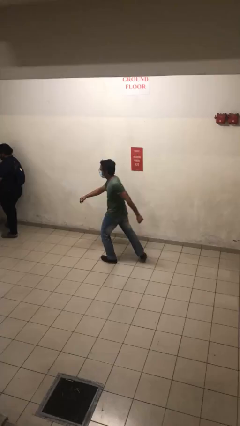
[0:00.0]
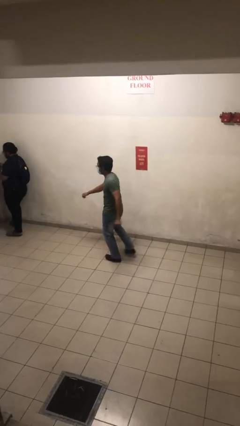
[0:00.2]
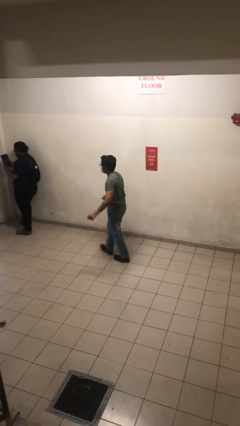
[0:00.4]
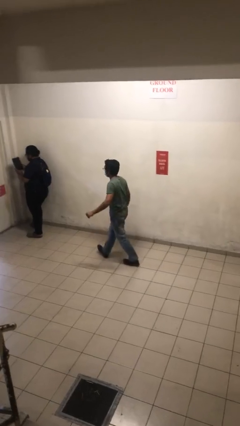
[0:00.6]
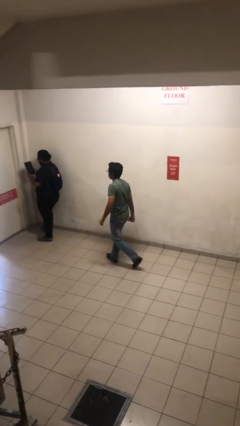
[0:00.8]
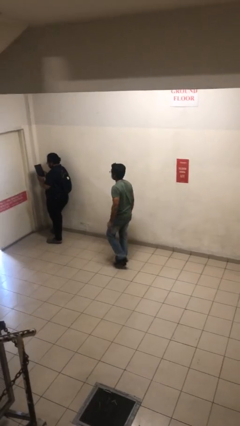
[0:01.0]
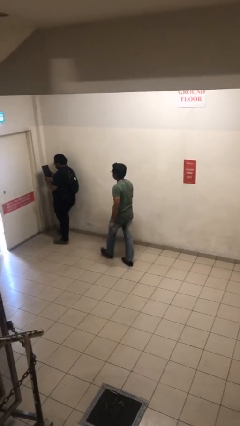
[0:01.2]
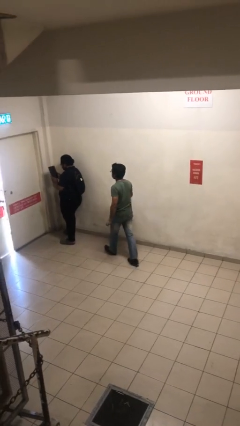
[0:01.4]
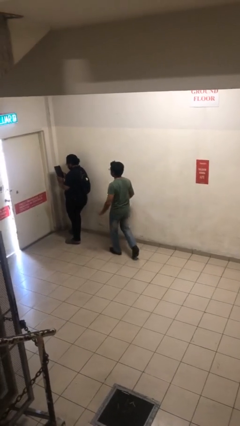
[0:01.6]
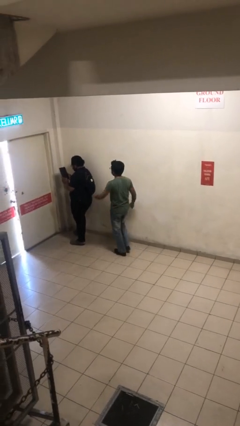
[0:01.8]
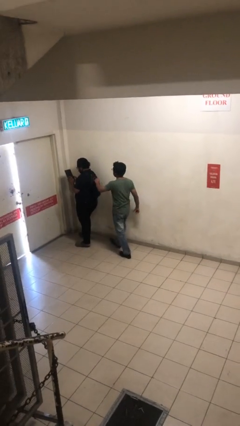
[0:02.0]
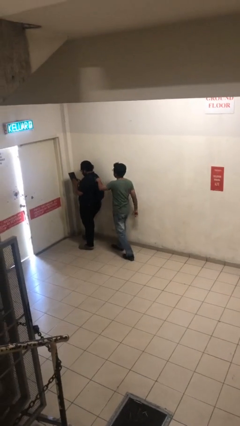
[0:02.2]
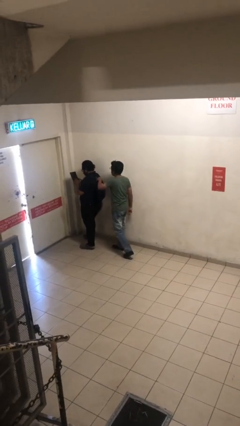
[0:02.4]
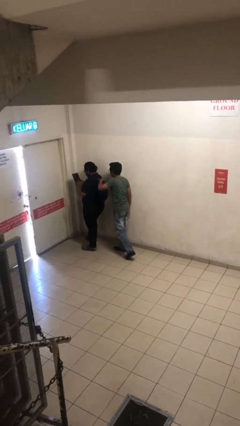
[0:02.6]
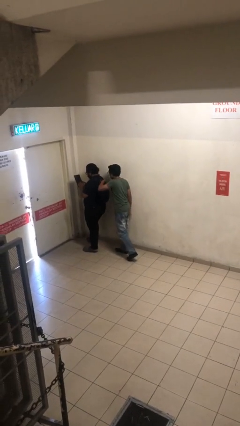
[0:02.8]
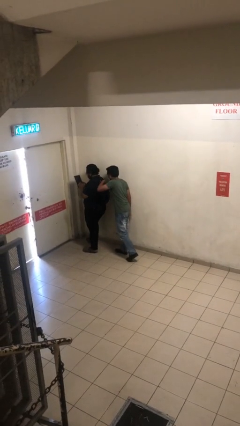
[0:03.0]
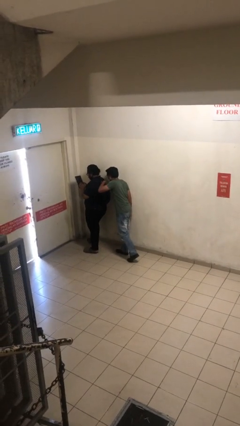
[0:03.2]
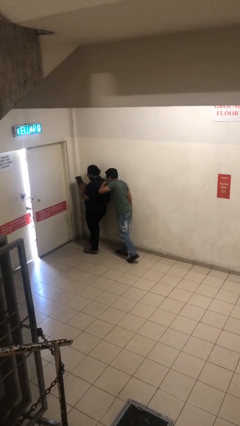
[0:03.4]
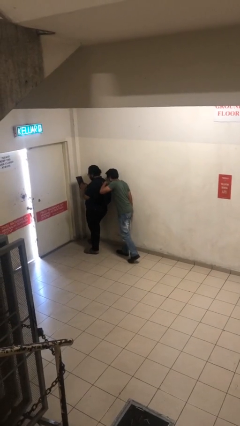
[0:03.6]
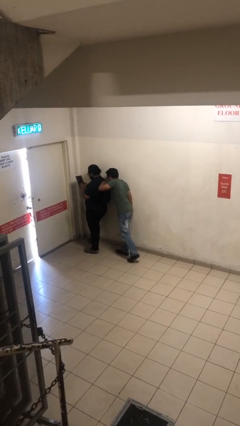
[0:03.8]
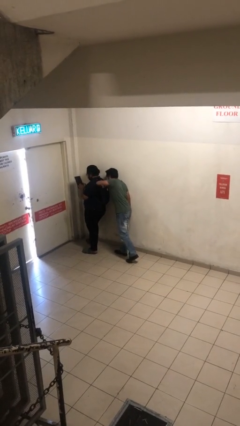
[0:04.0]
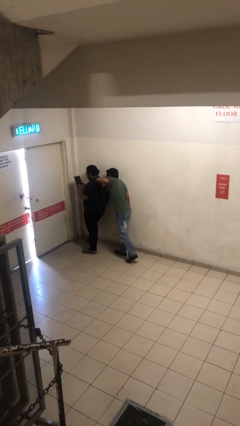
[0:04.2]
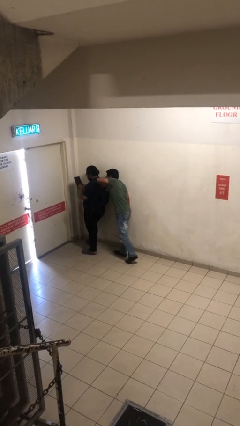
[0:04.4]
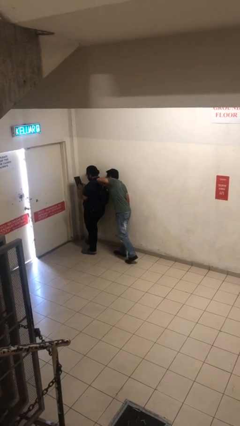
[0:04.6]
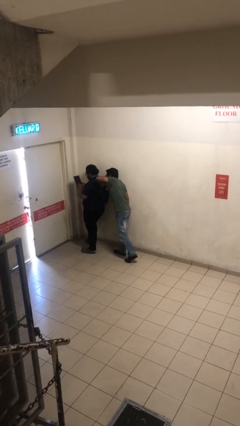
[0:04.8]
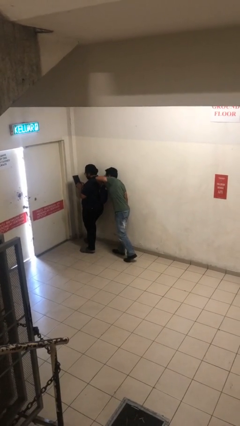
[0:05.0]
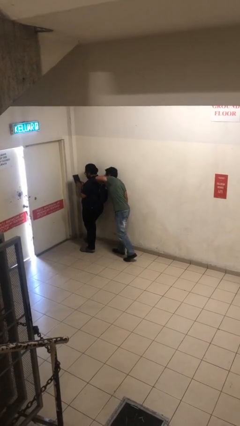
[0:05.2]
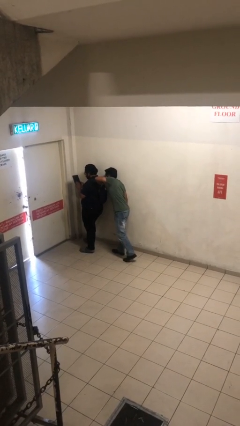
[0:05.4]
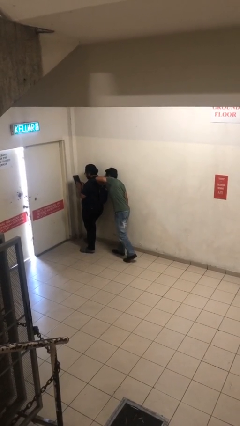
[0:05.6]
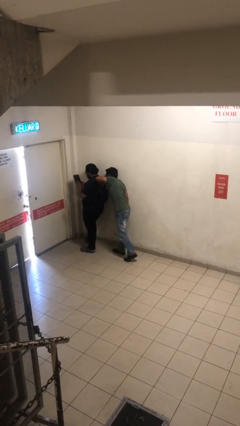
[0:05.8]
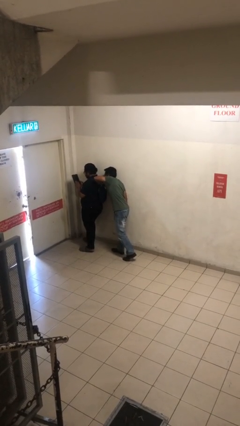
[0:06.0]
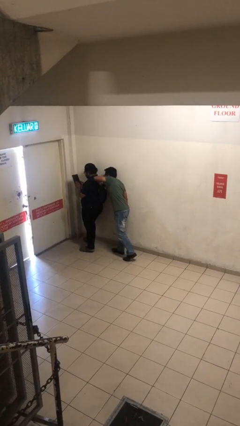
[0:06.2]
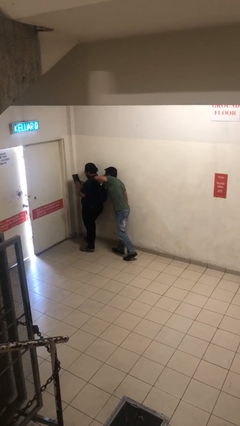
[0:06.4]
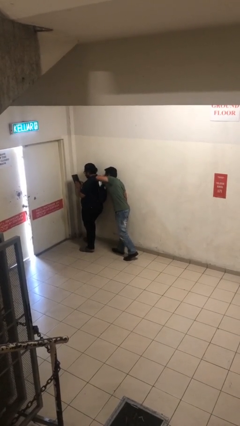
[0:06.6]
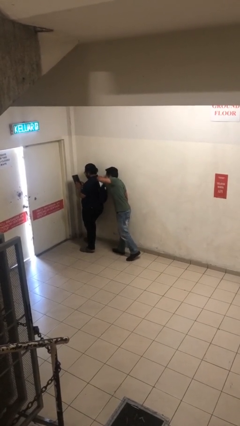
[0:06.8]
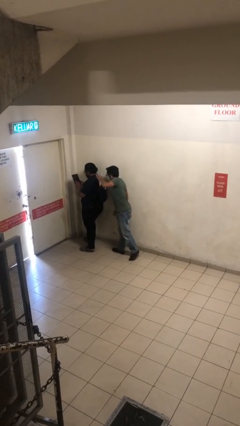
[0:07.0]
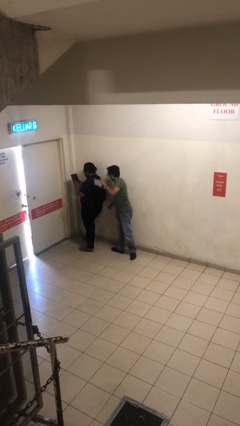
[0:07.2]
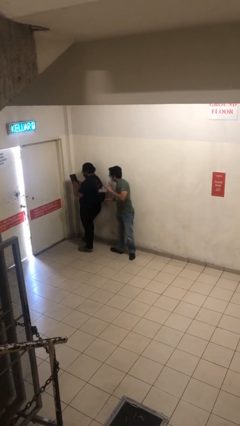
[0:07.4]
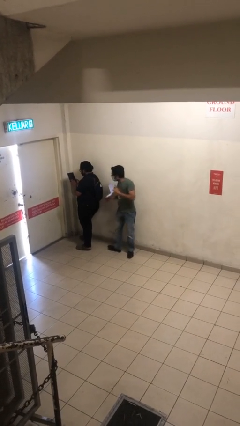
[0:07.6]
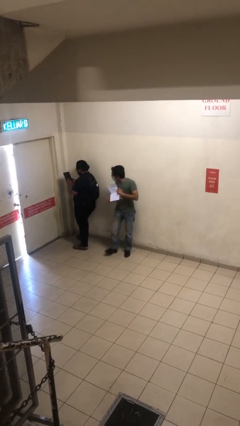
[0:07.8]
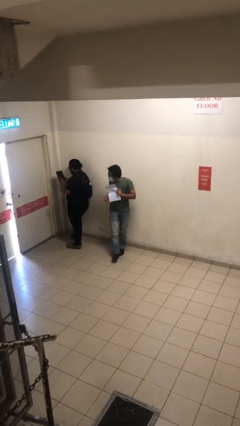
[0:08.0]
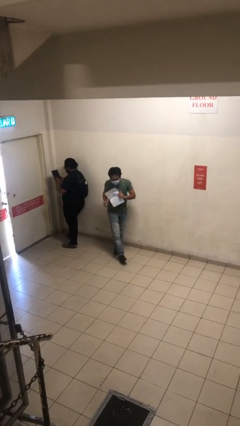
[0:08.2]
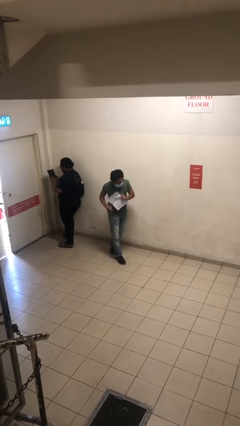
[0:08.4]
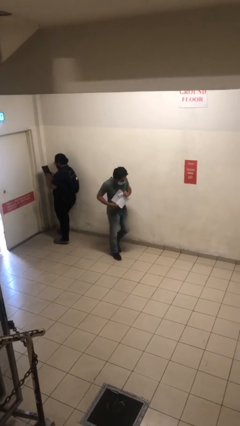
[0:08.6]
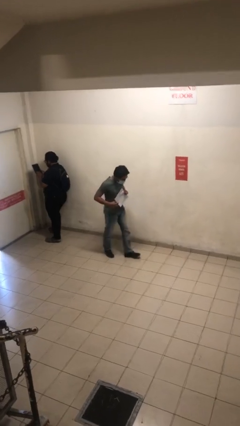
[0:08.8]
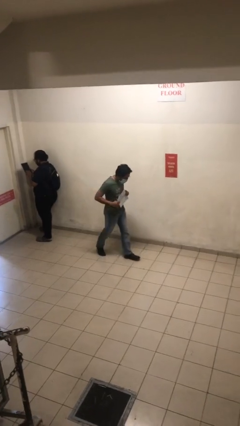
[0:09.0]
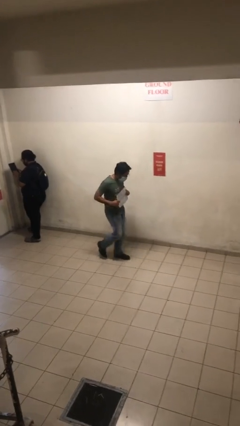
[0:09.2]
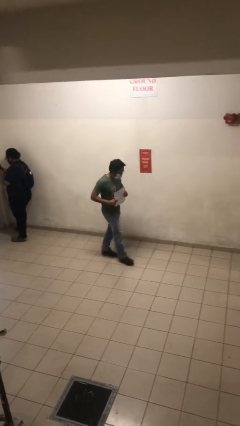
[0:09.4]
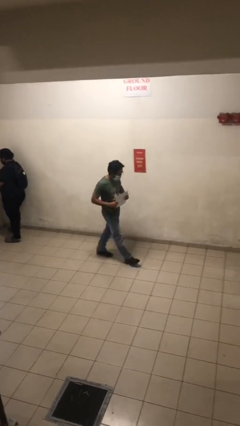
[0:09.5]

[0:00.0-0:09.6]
person steals object from person

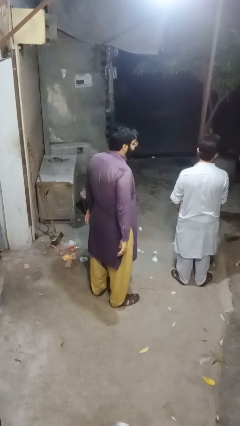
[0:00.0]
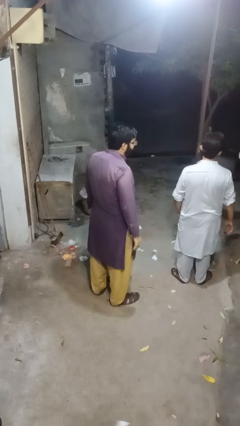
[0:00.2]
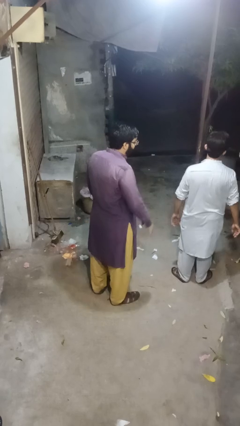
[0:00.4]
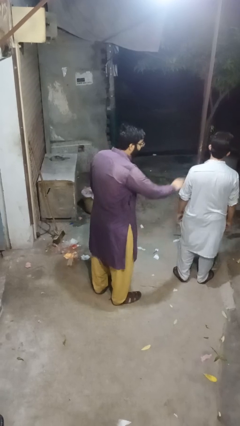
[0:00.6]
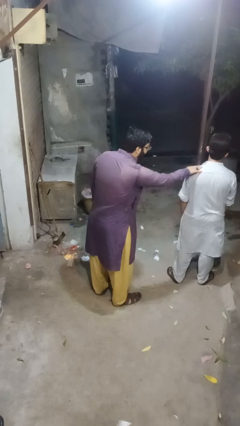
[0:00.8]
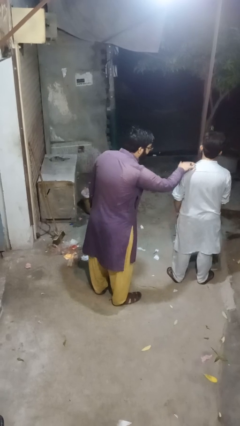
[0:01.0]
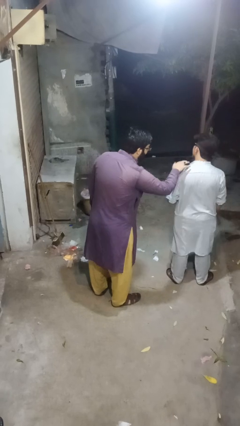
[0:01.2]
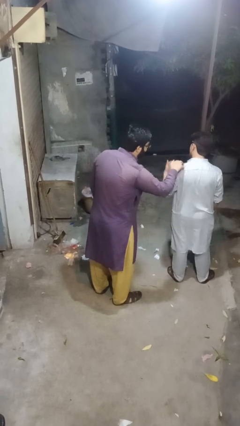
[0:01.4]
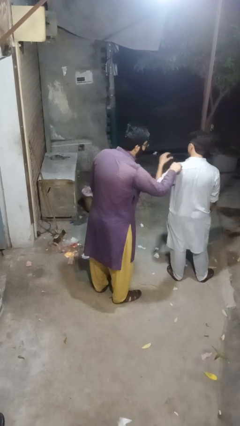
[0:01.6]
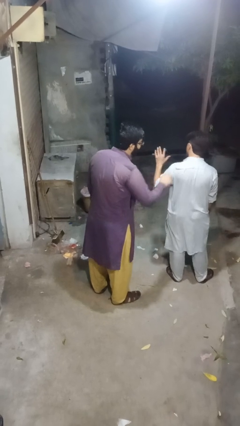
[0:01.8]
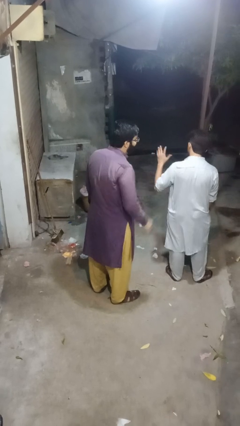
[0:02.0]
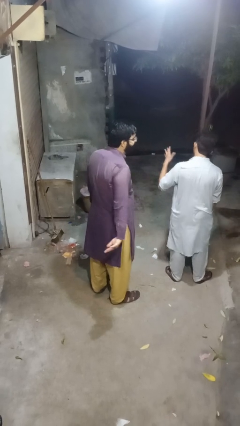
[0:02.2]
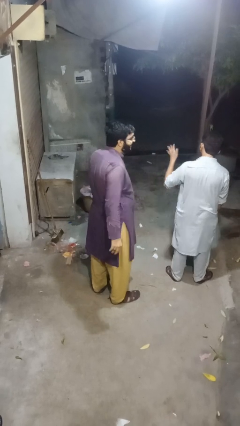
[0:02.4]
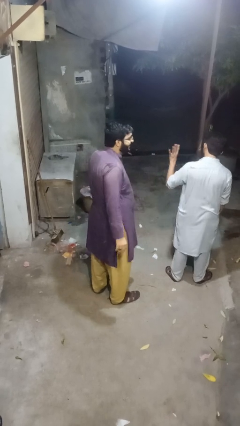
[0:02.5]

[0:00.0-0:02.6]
person touches back of person

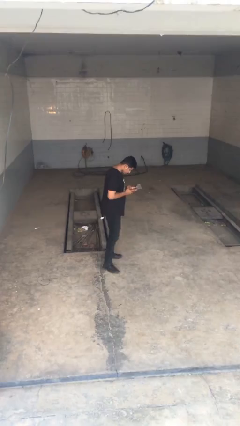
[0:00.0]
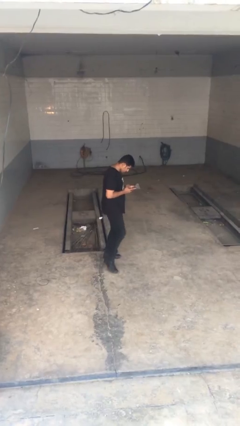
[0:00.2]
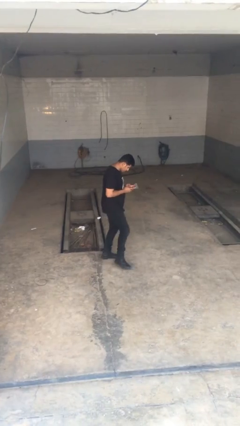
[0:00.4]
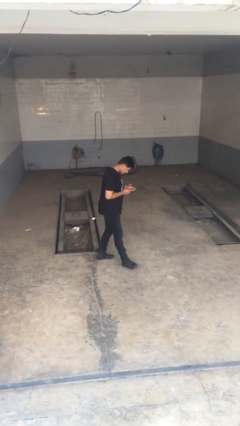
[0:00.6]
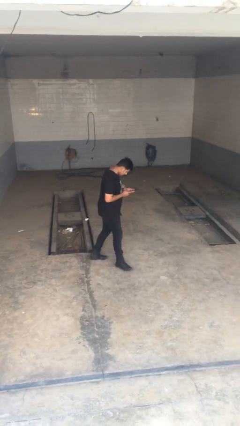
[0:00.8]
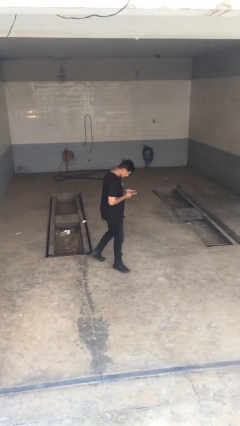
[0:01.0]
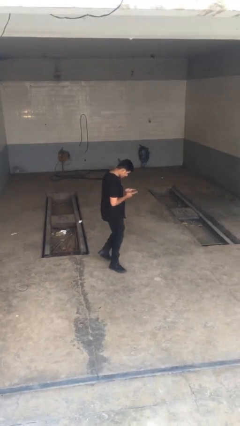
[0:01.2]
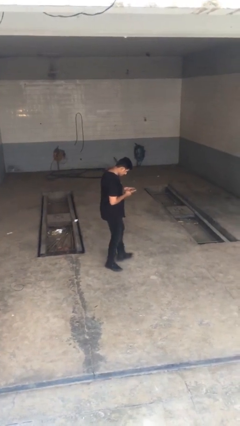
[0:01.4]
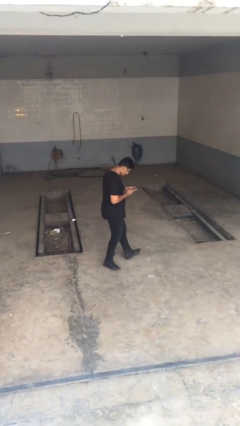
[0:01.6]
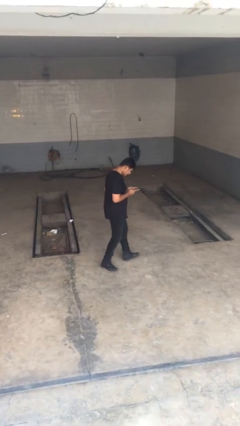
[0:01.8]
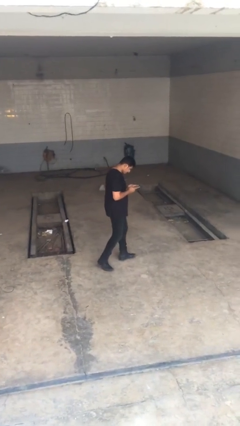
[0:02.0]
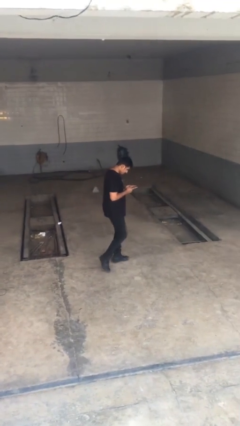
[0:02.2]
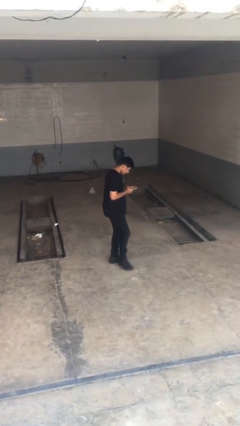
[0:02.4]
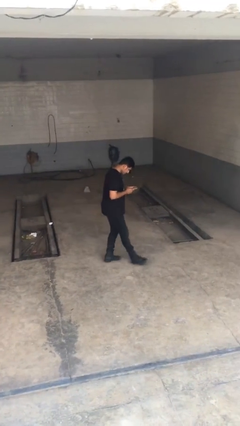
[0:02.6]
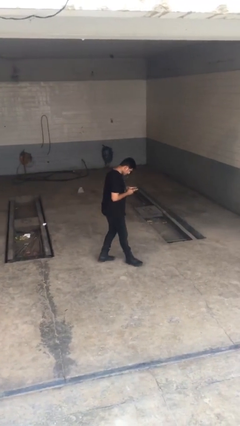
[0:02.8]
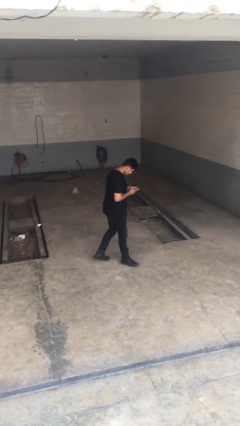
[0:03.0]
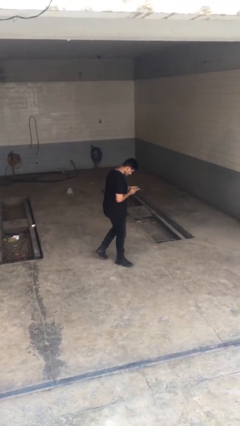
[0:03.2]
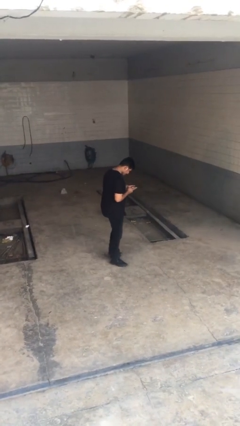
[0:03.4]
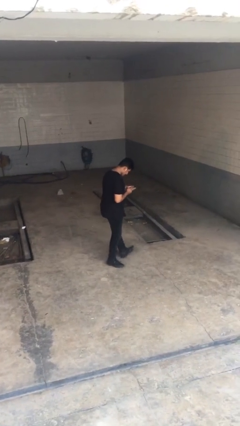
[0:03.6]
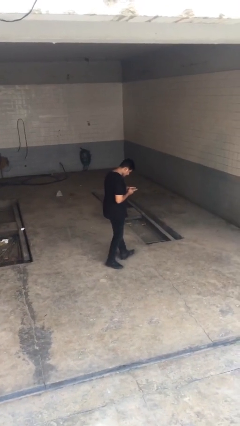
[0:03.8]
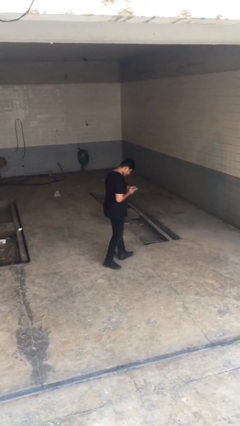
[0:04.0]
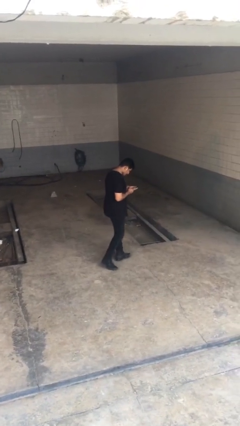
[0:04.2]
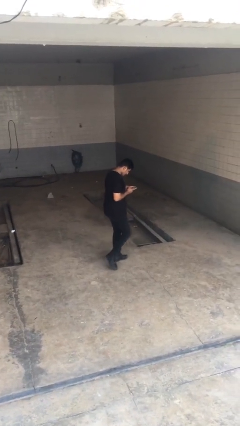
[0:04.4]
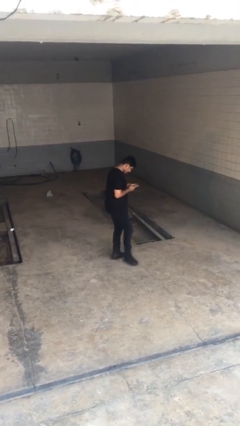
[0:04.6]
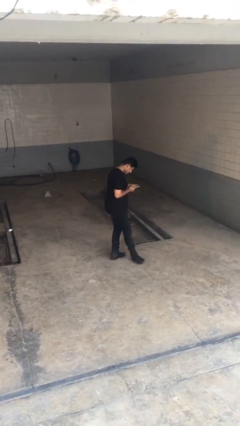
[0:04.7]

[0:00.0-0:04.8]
person texts on phone

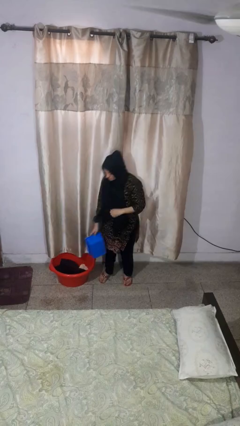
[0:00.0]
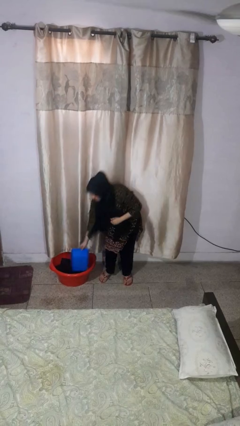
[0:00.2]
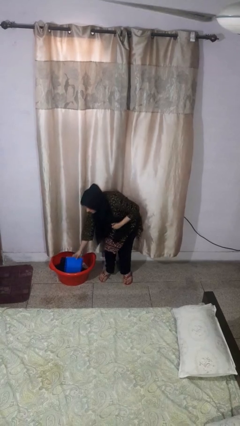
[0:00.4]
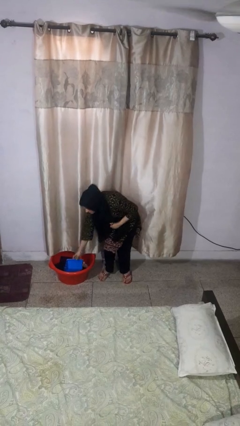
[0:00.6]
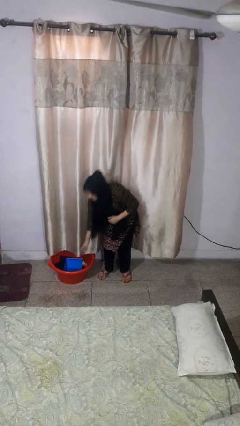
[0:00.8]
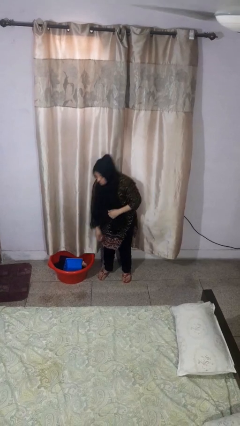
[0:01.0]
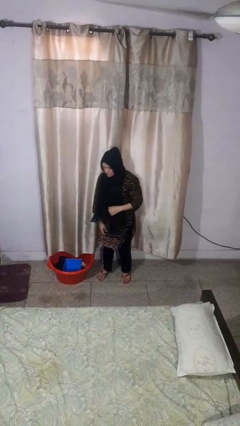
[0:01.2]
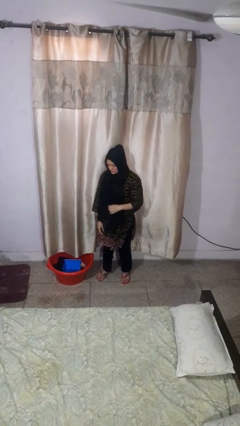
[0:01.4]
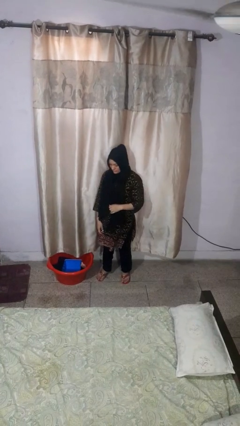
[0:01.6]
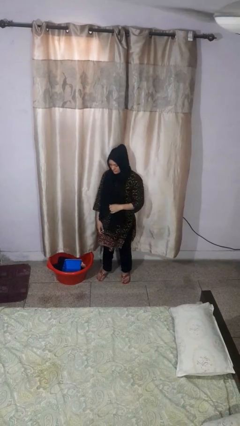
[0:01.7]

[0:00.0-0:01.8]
person puts object into basket
